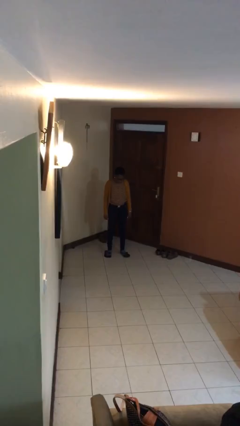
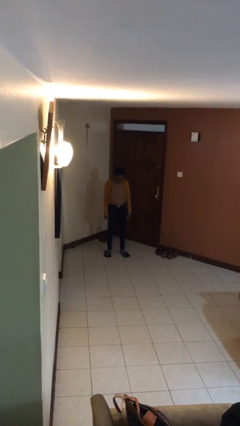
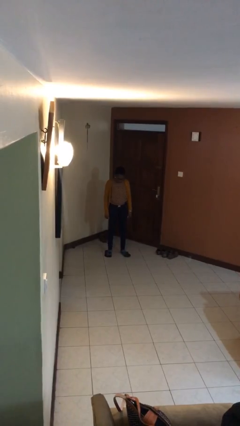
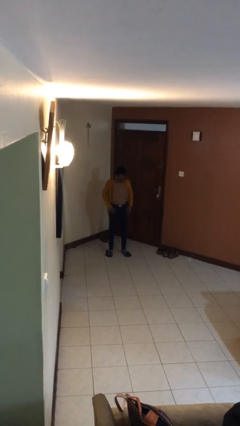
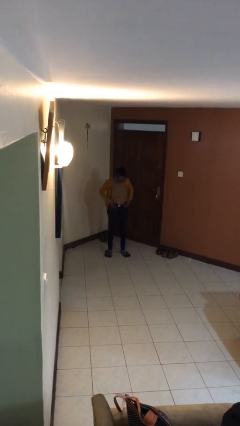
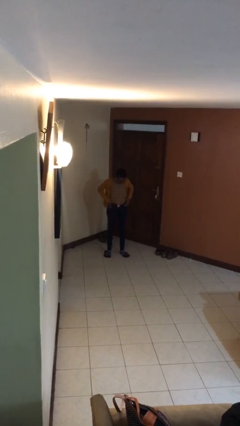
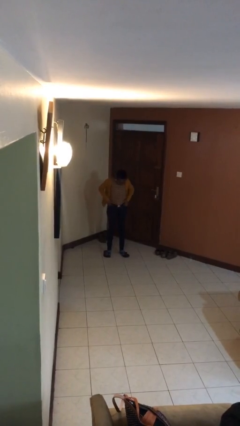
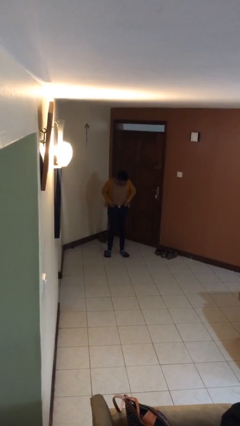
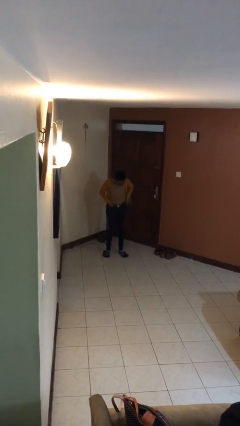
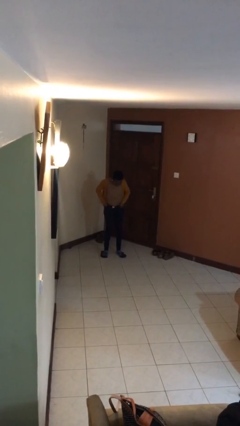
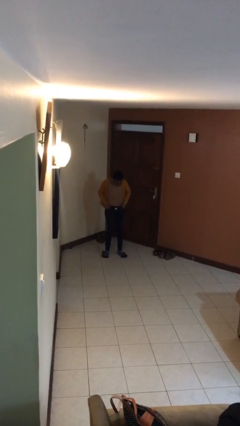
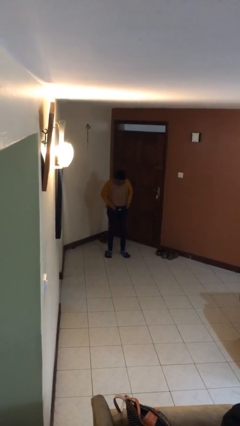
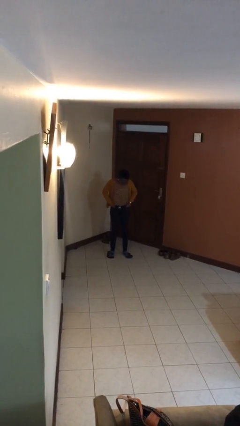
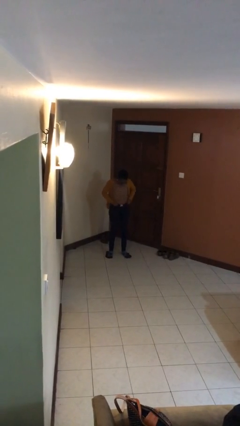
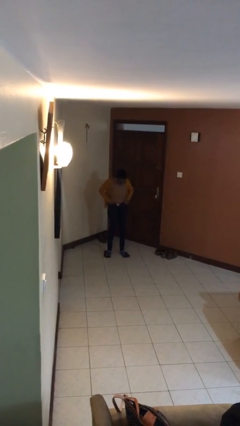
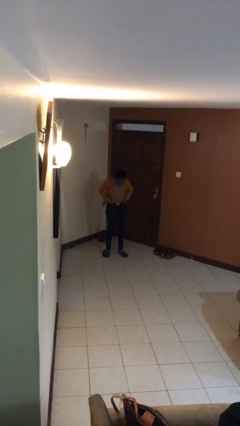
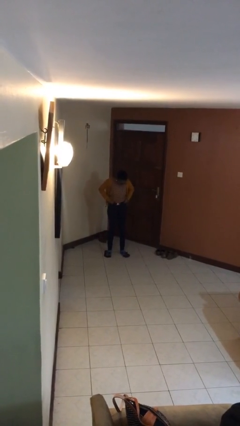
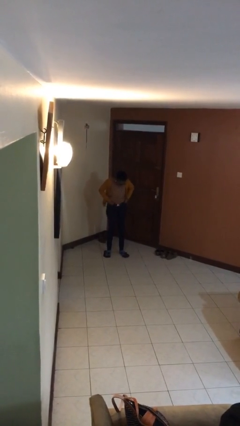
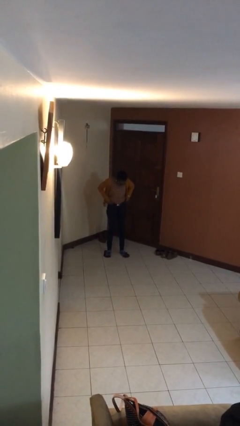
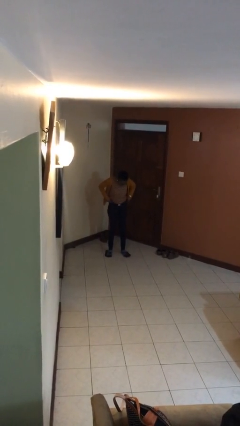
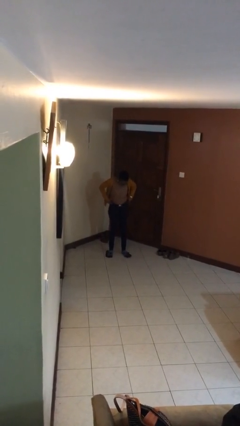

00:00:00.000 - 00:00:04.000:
person hikes up pants

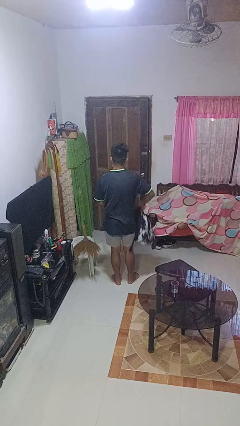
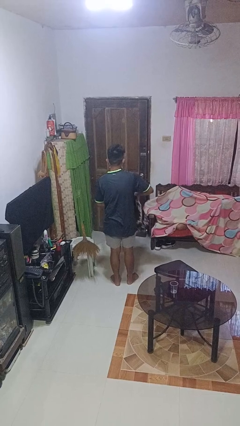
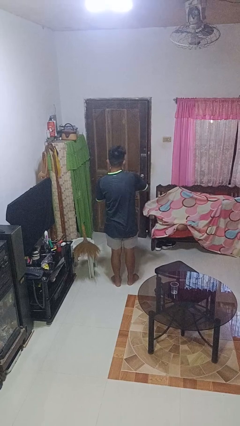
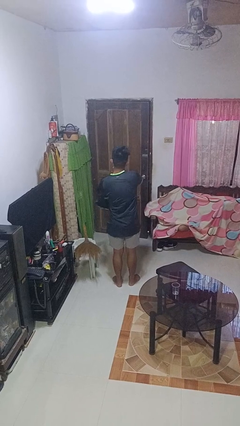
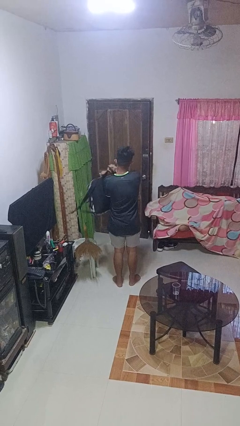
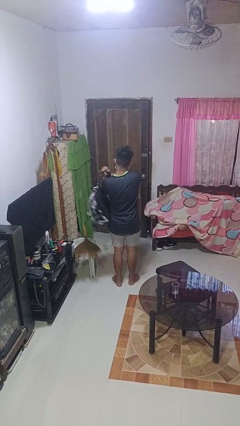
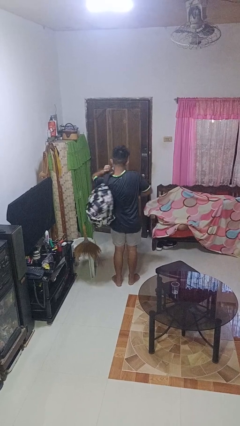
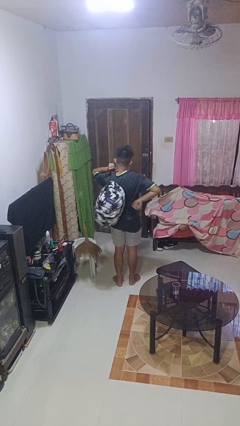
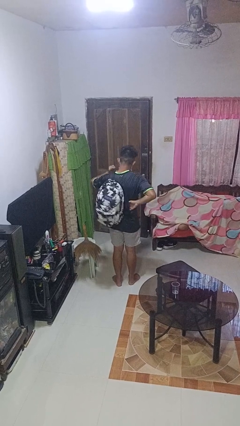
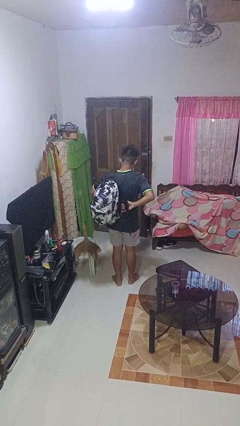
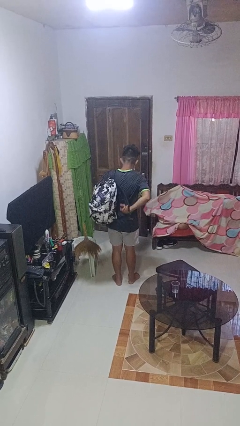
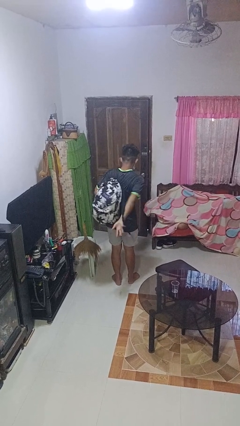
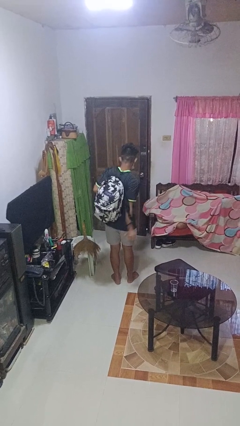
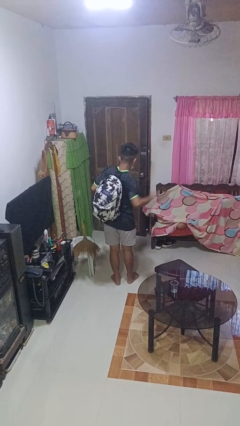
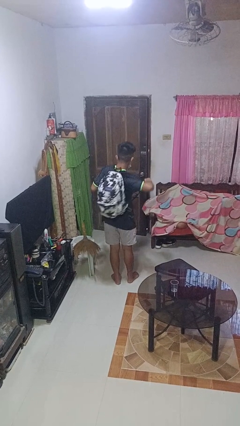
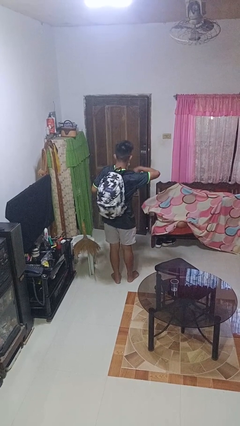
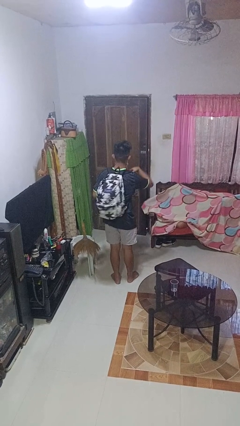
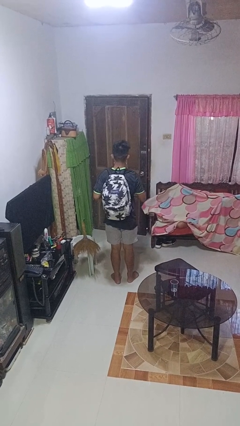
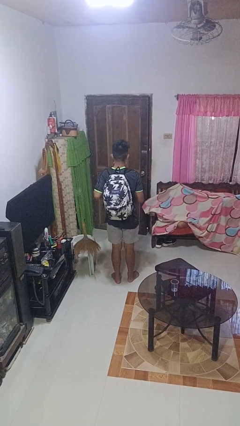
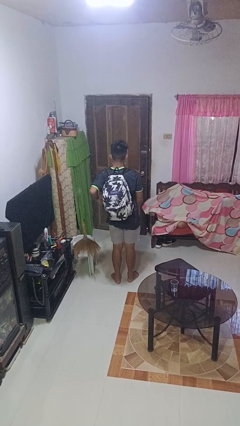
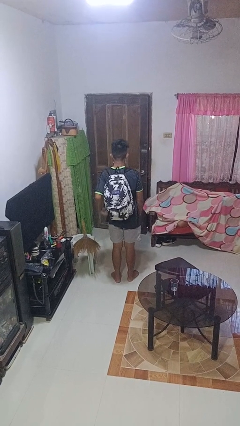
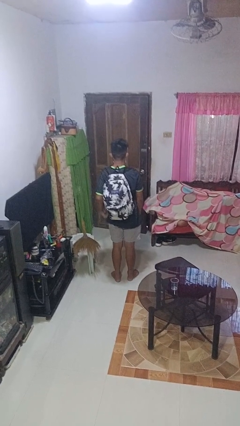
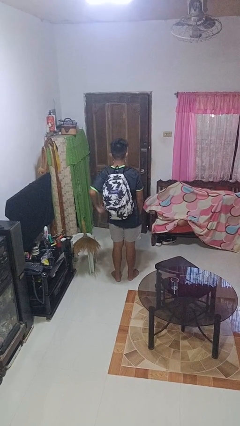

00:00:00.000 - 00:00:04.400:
person puts on backpack

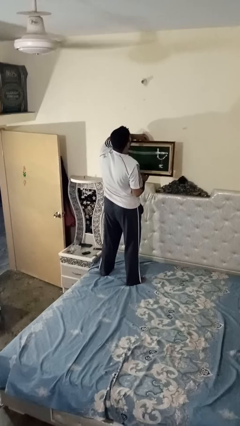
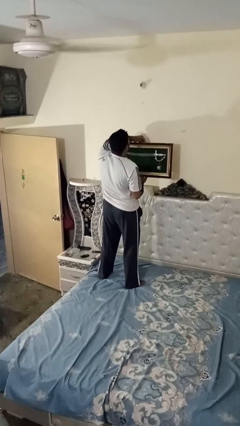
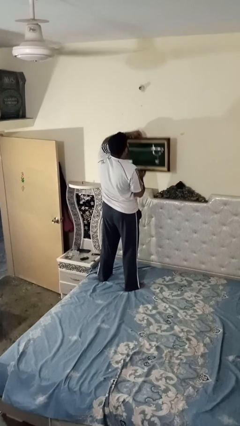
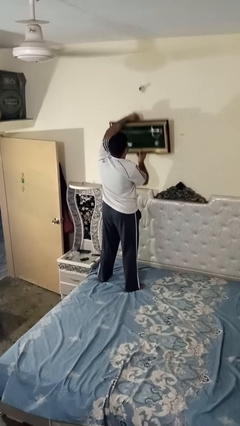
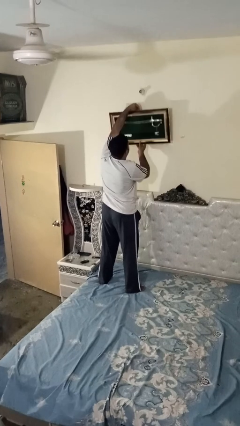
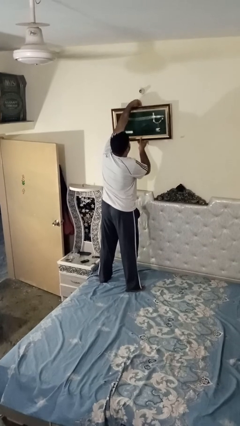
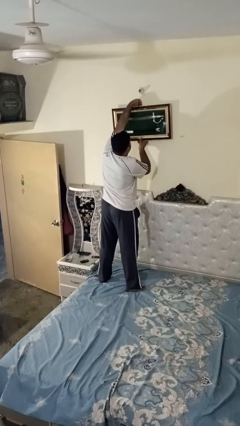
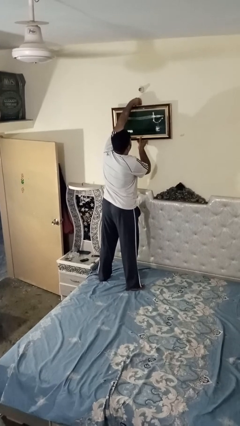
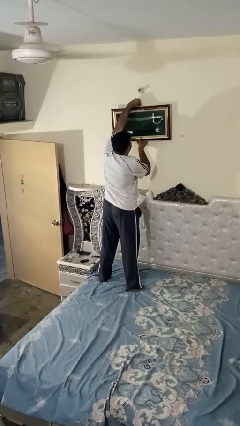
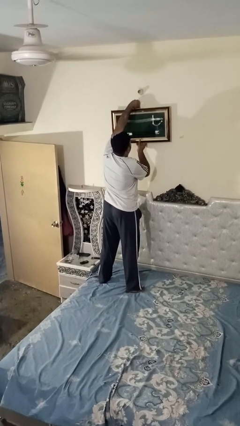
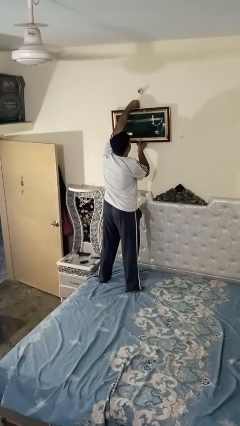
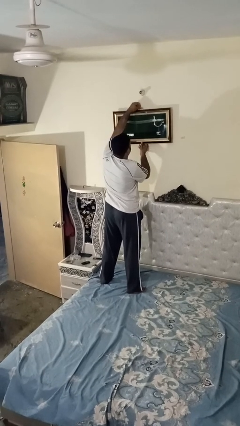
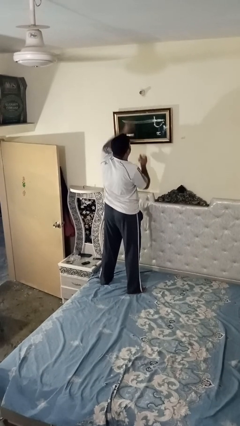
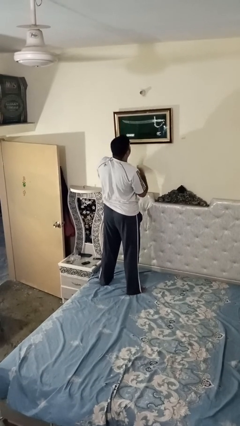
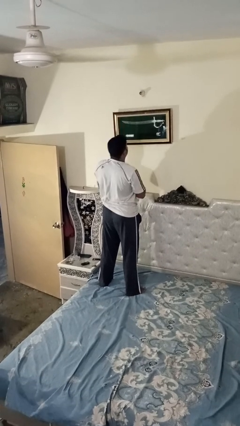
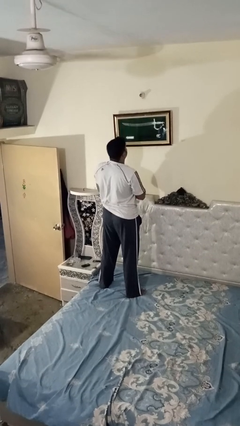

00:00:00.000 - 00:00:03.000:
person puts up picture frame

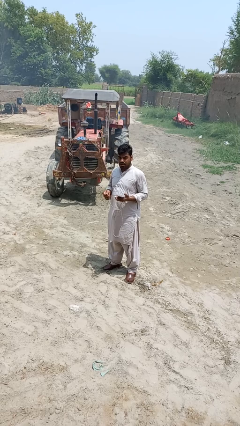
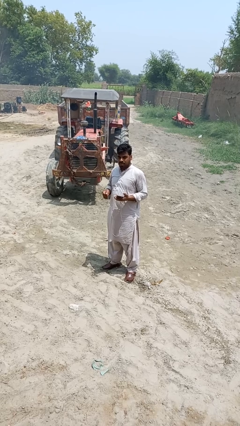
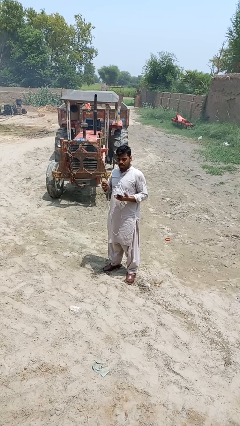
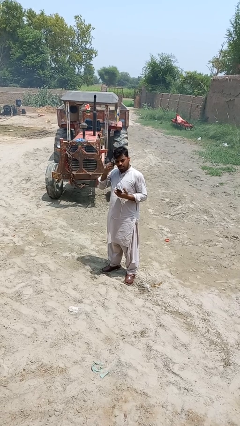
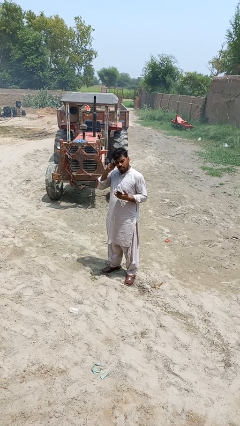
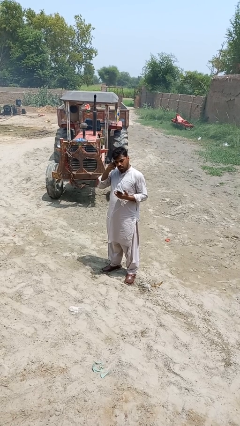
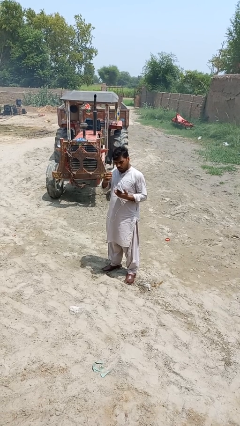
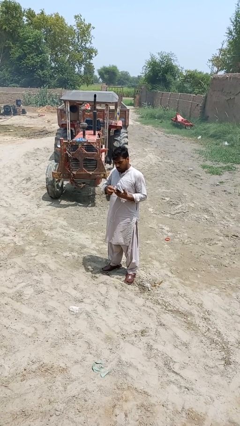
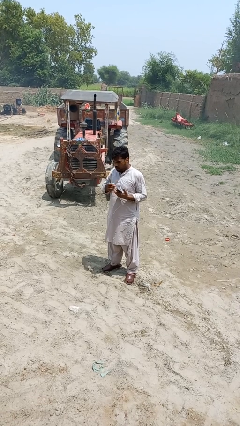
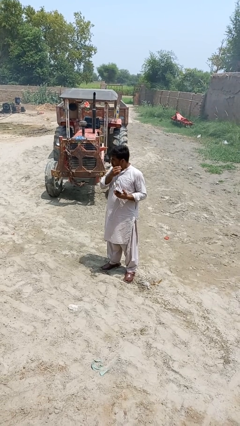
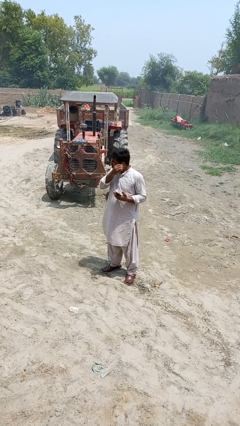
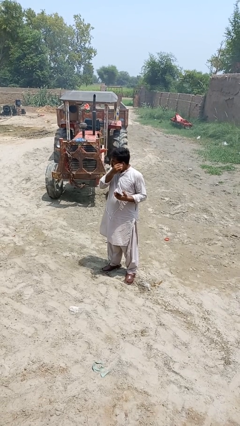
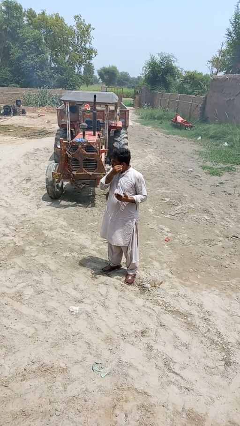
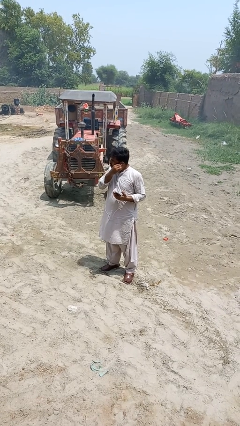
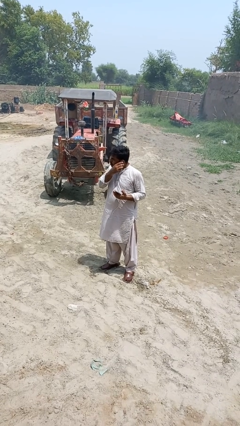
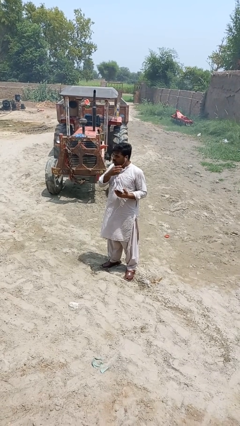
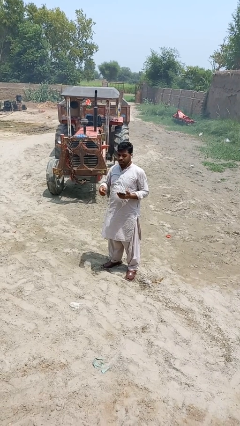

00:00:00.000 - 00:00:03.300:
person puts on headphones

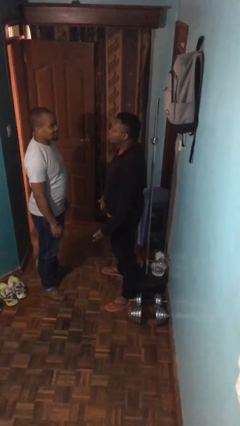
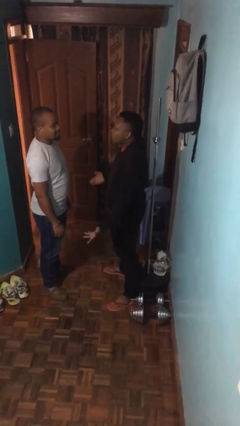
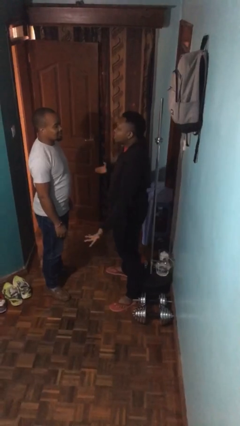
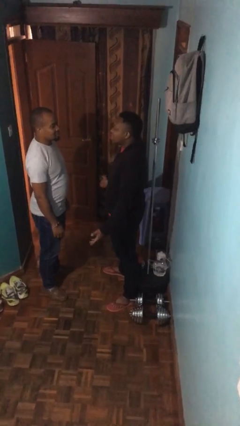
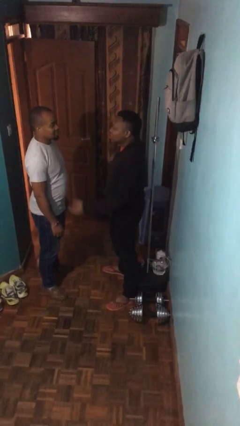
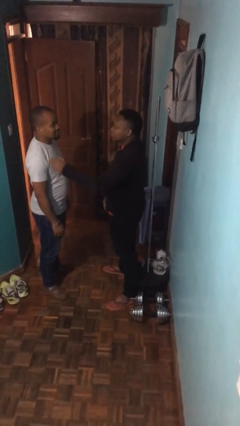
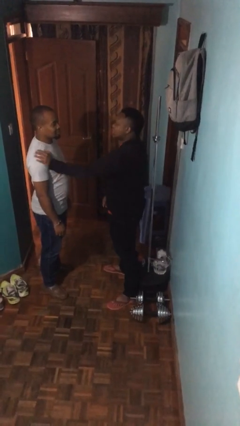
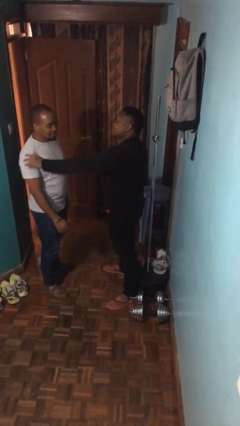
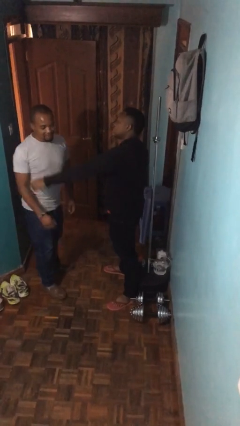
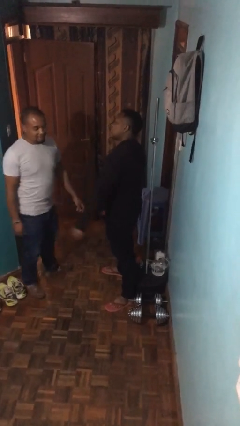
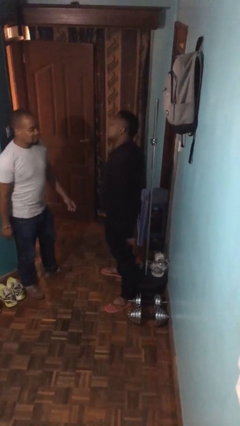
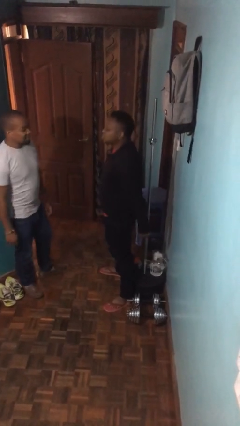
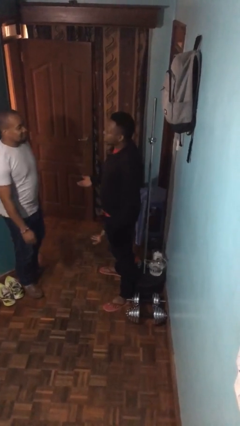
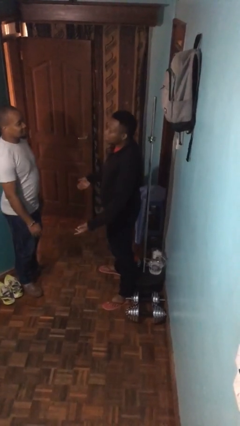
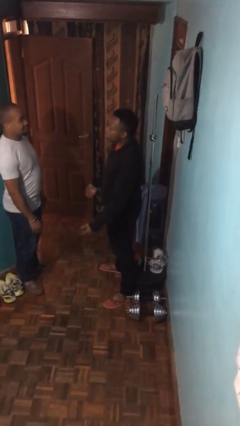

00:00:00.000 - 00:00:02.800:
person shoves person
